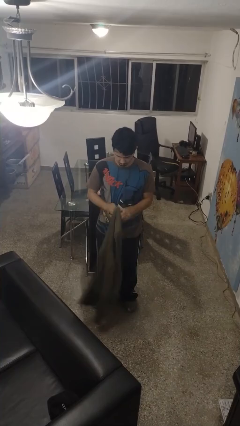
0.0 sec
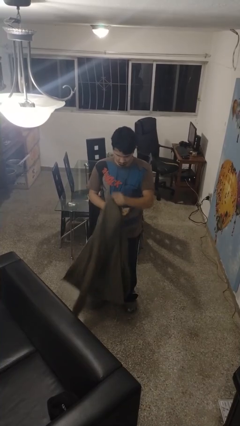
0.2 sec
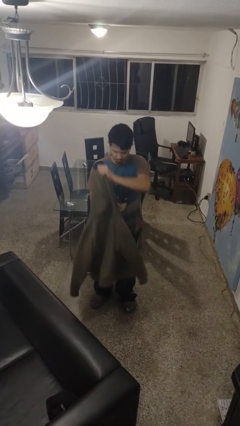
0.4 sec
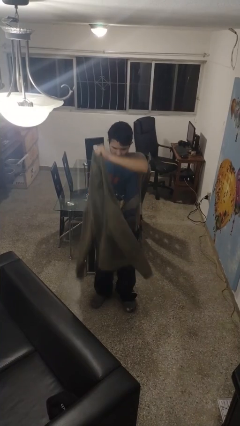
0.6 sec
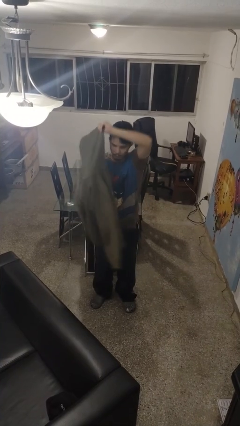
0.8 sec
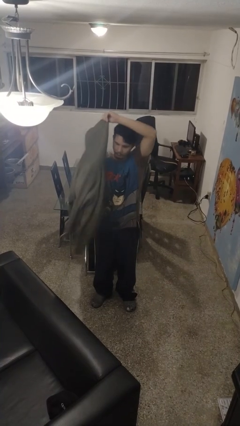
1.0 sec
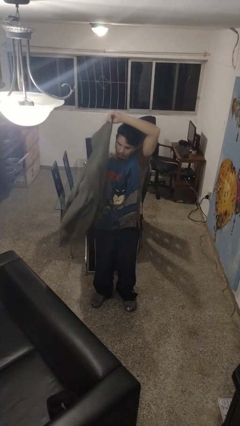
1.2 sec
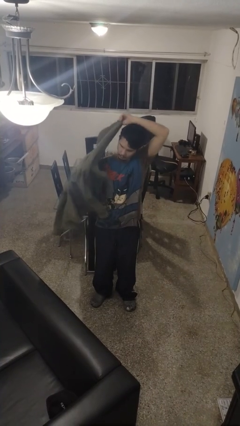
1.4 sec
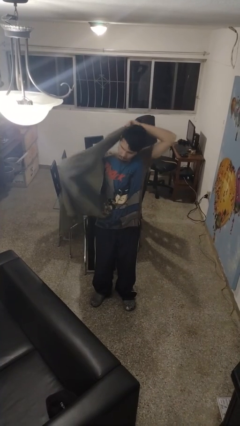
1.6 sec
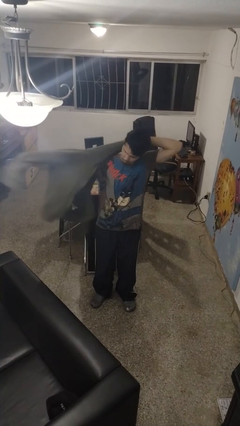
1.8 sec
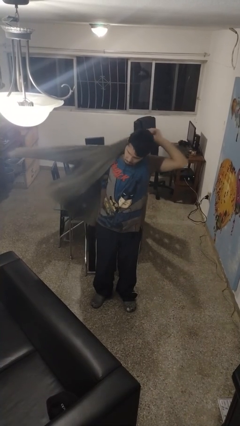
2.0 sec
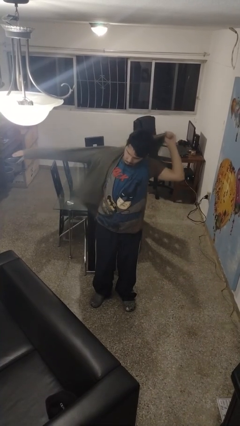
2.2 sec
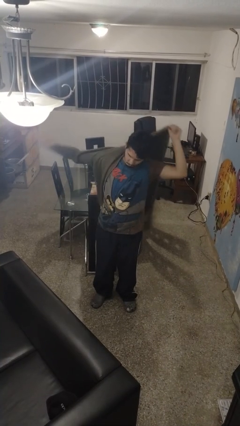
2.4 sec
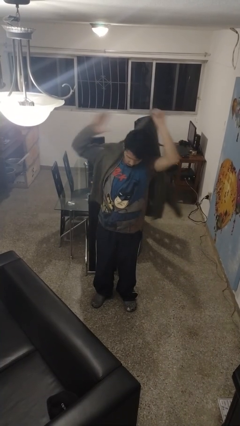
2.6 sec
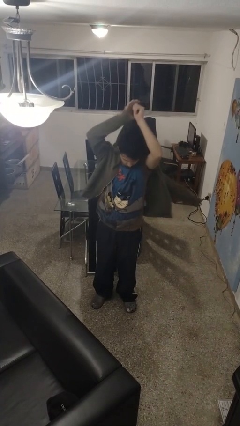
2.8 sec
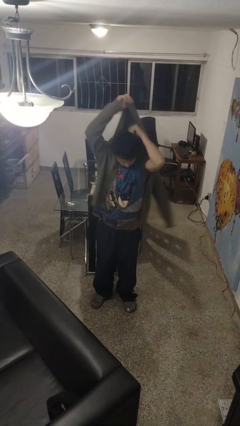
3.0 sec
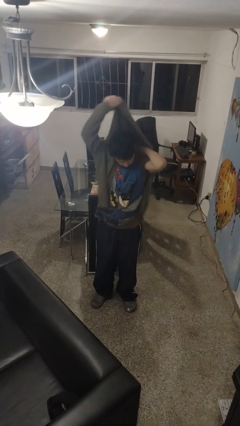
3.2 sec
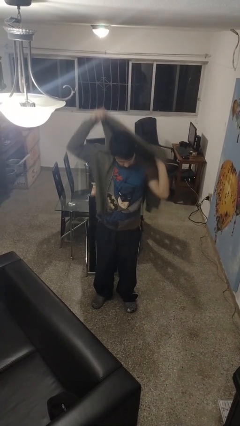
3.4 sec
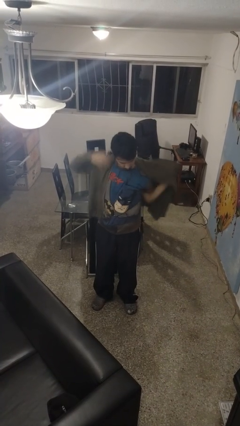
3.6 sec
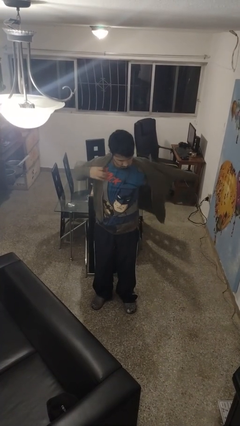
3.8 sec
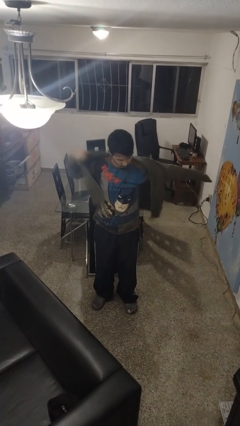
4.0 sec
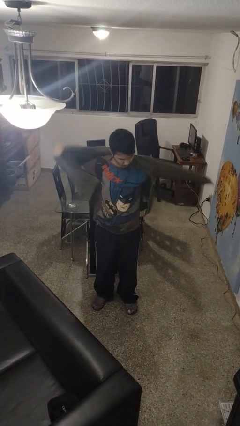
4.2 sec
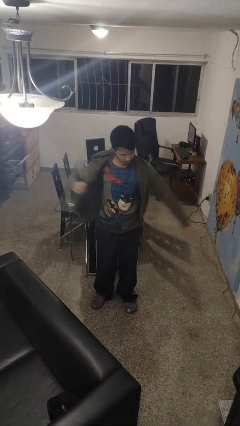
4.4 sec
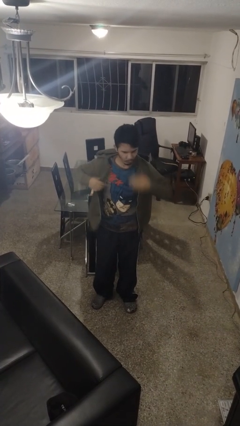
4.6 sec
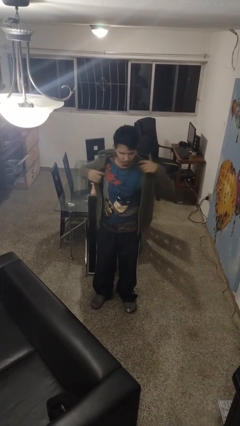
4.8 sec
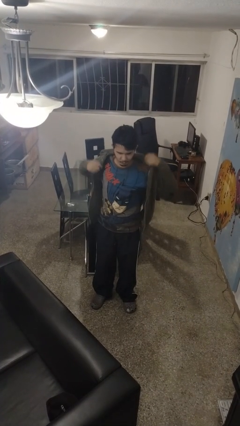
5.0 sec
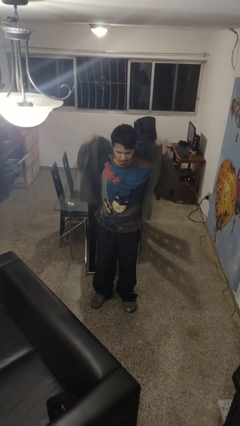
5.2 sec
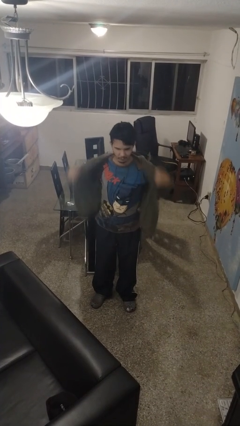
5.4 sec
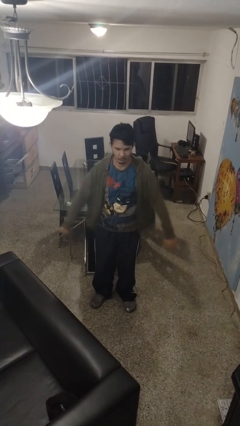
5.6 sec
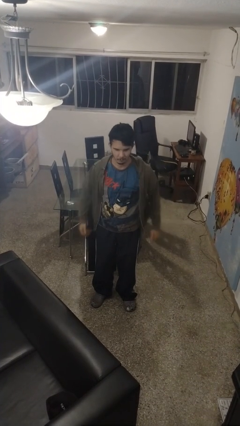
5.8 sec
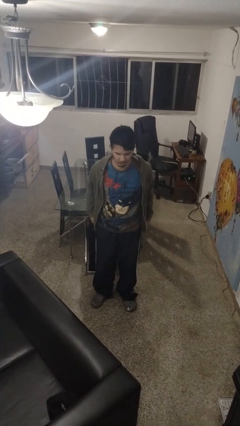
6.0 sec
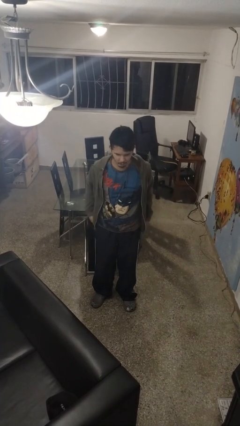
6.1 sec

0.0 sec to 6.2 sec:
person puts on jacket

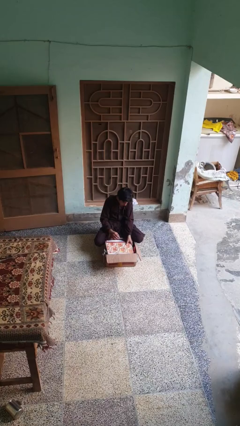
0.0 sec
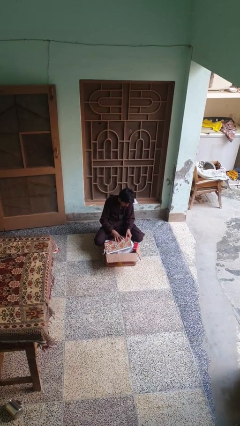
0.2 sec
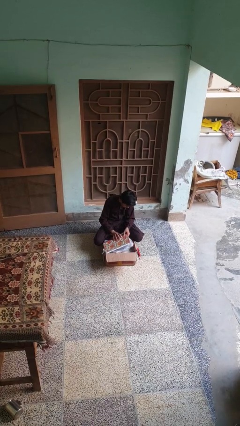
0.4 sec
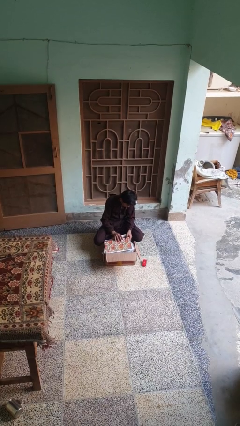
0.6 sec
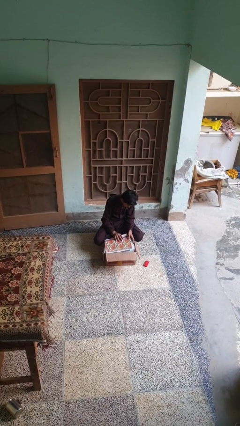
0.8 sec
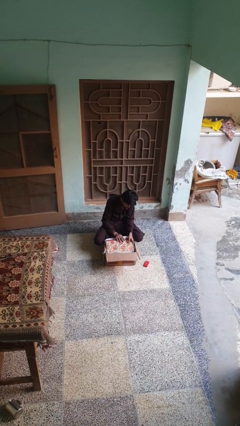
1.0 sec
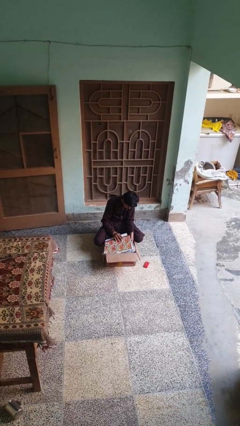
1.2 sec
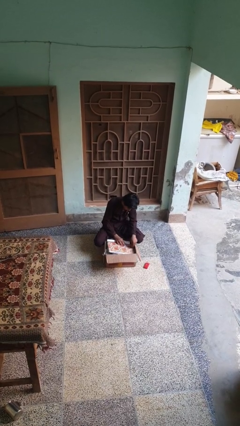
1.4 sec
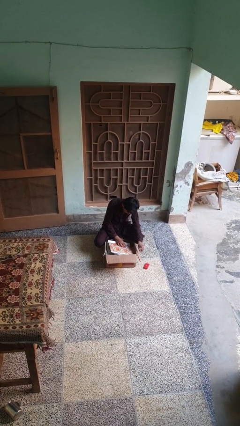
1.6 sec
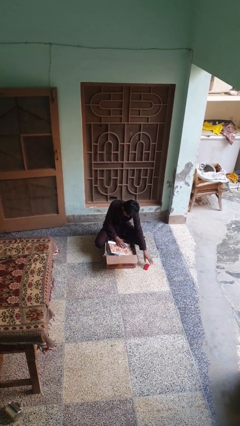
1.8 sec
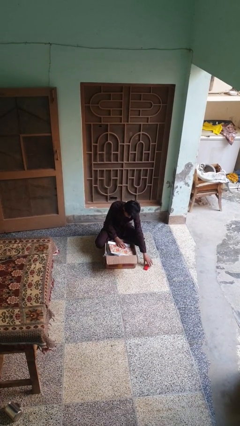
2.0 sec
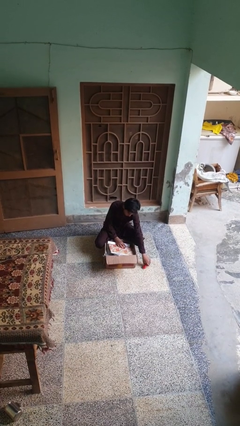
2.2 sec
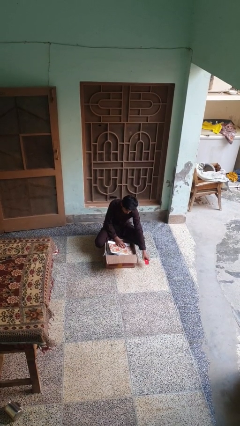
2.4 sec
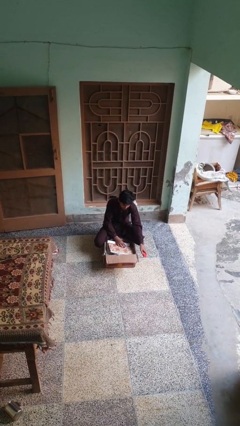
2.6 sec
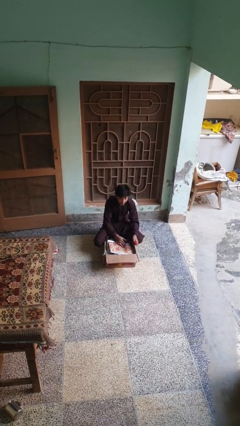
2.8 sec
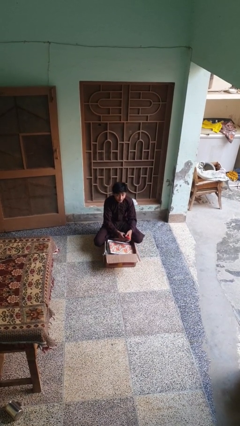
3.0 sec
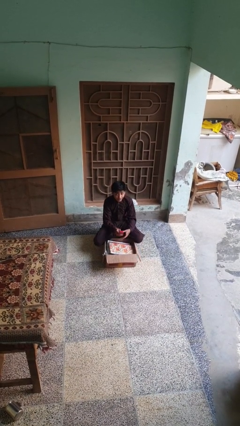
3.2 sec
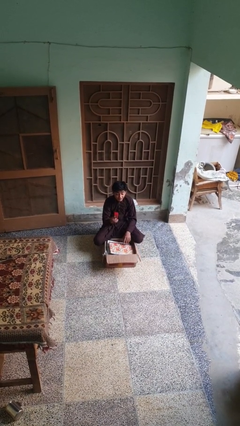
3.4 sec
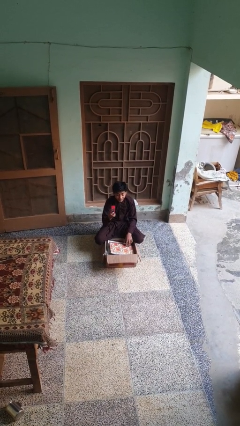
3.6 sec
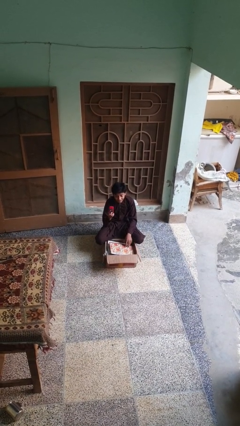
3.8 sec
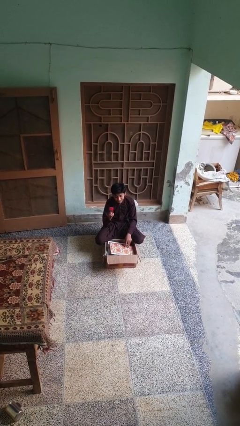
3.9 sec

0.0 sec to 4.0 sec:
person takes object from box

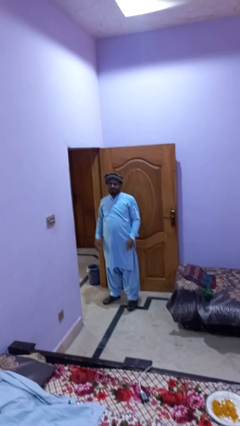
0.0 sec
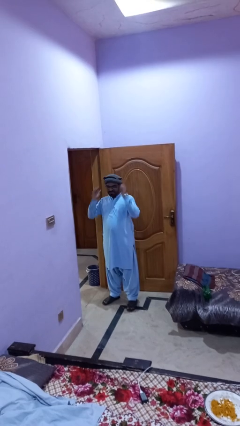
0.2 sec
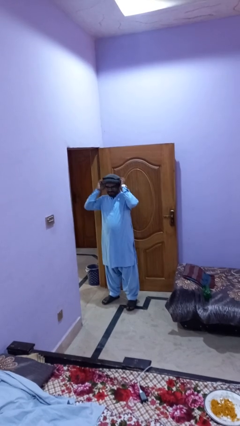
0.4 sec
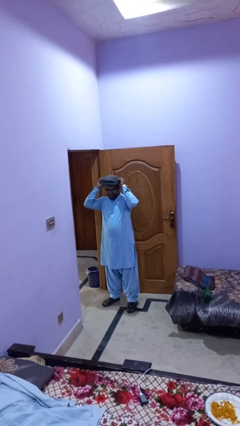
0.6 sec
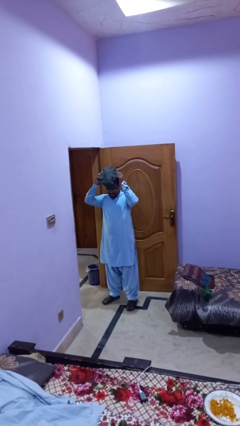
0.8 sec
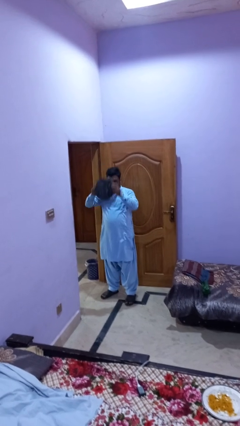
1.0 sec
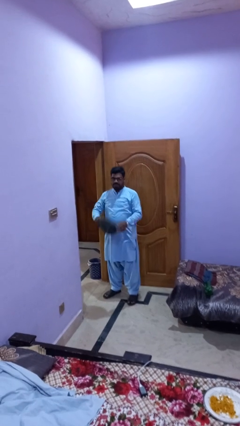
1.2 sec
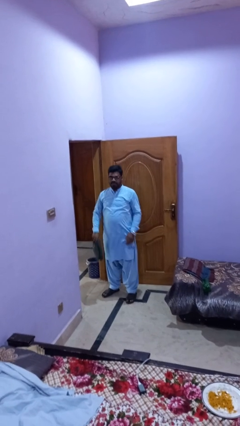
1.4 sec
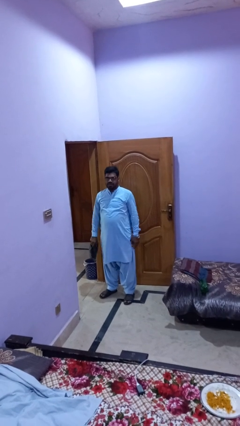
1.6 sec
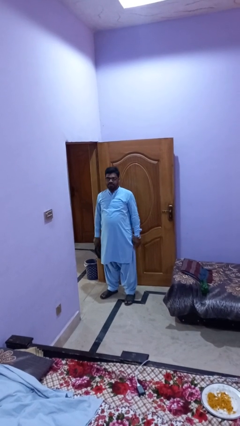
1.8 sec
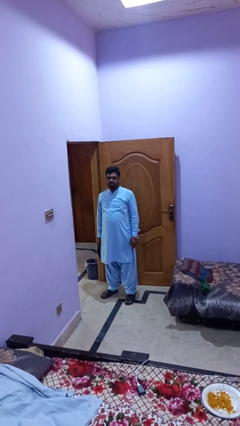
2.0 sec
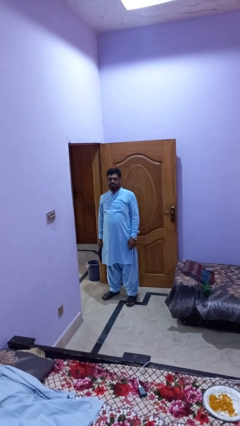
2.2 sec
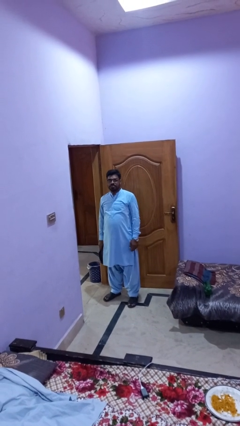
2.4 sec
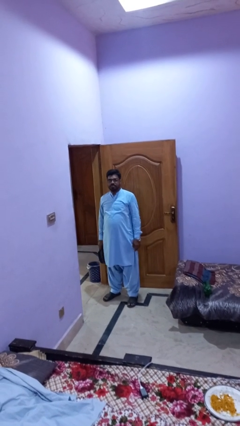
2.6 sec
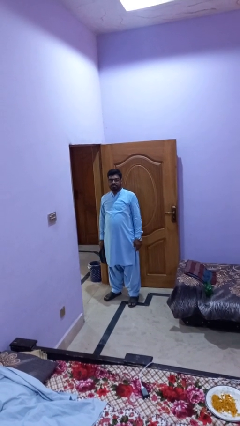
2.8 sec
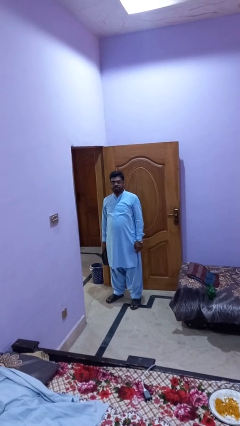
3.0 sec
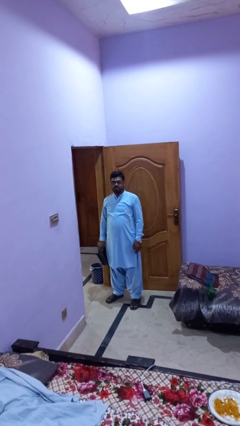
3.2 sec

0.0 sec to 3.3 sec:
person takes off hat

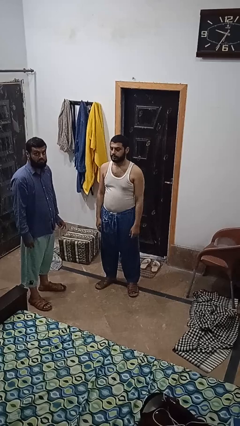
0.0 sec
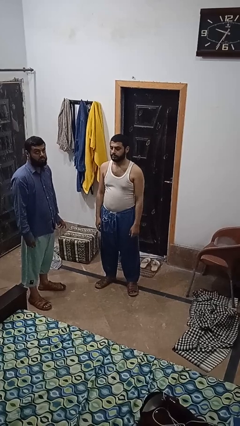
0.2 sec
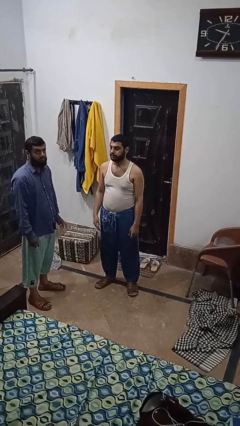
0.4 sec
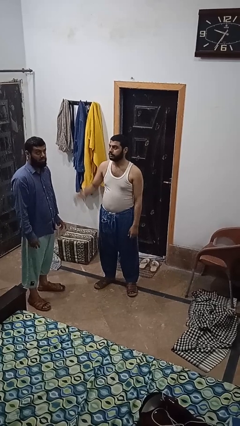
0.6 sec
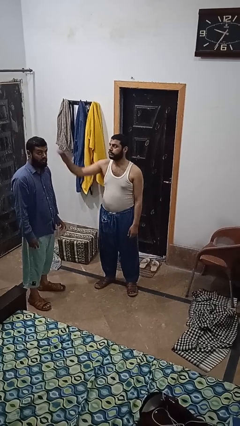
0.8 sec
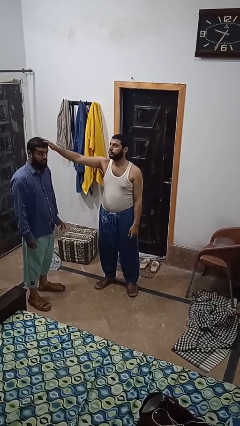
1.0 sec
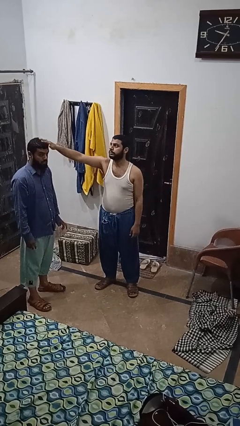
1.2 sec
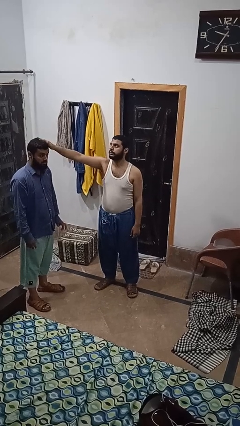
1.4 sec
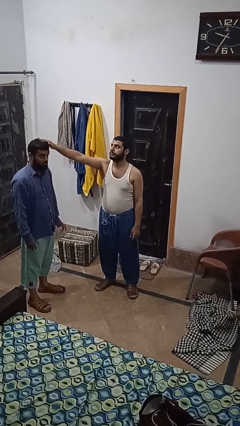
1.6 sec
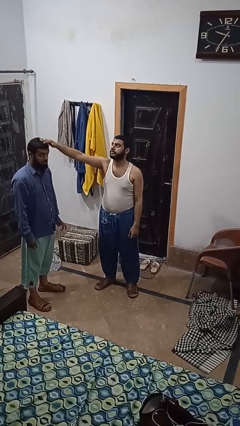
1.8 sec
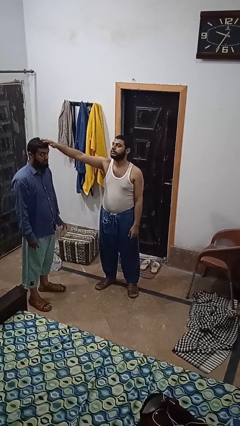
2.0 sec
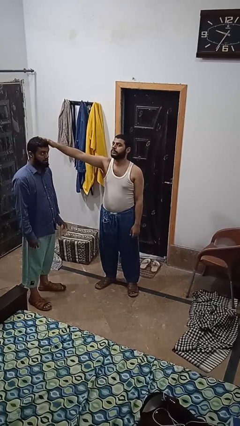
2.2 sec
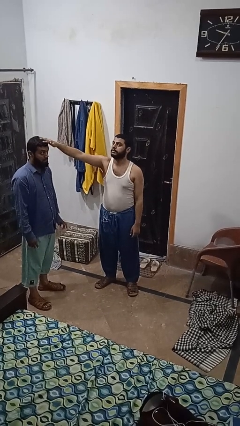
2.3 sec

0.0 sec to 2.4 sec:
person grabs person by hair

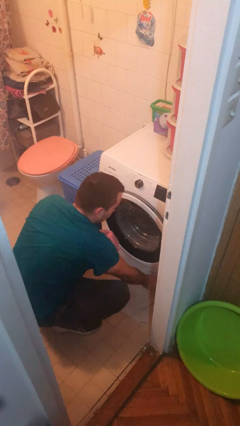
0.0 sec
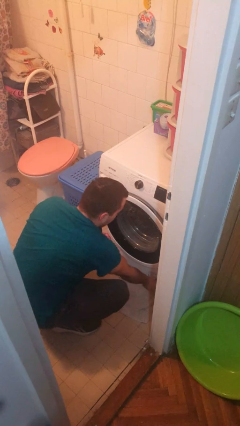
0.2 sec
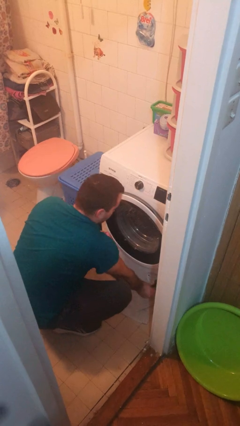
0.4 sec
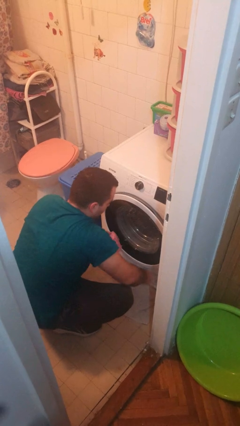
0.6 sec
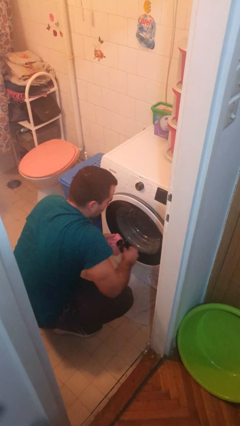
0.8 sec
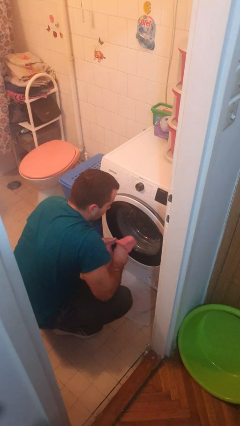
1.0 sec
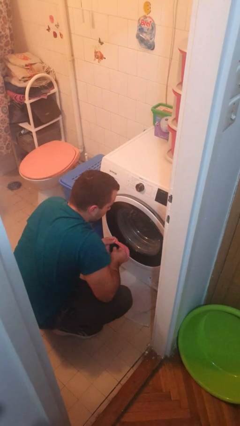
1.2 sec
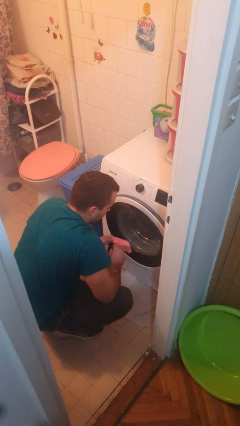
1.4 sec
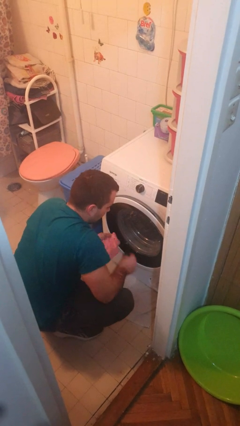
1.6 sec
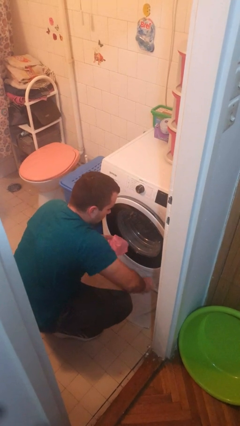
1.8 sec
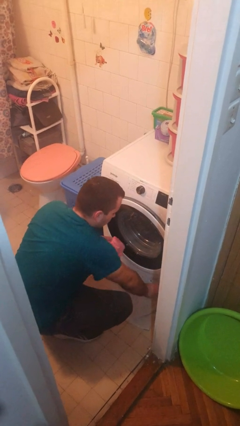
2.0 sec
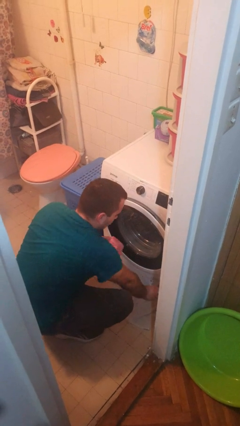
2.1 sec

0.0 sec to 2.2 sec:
person cleans dryer lint trap
